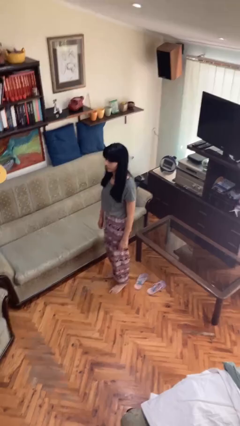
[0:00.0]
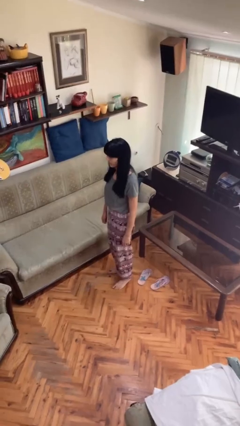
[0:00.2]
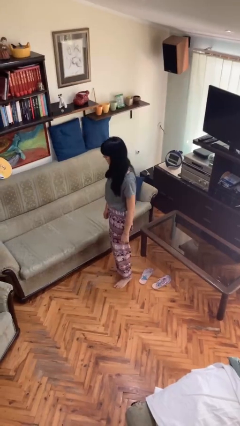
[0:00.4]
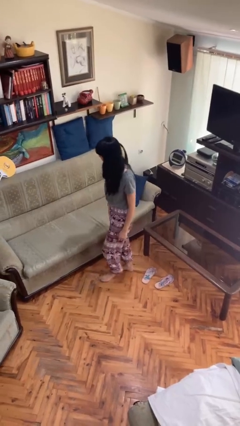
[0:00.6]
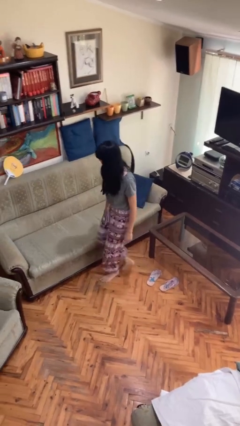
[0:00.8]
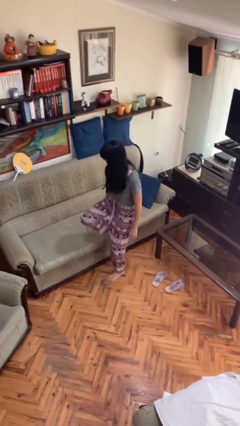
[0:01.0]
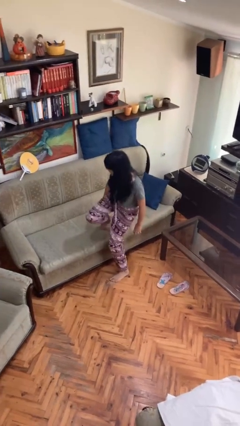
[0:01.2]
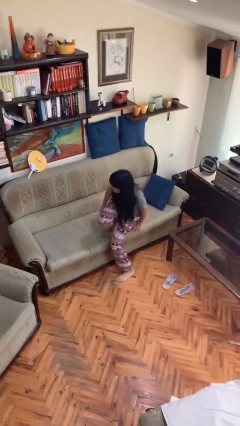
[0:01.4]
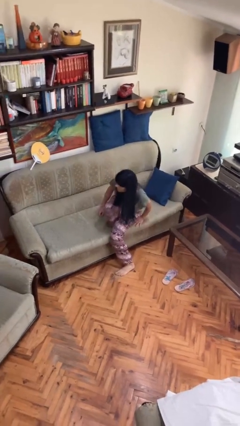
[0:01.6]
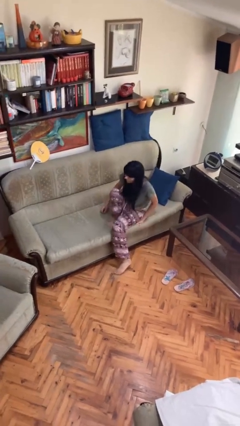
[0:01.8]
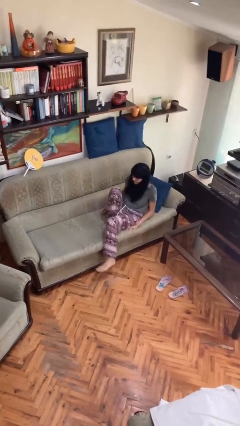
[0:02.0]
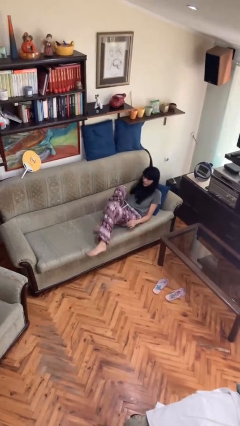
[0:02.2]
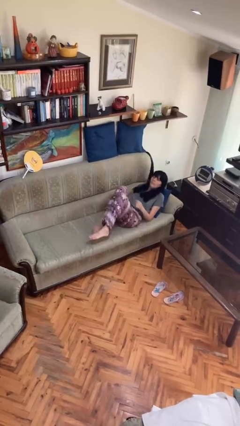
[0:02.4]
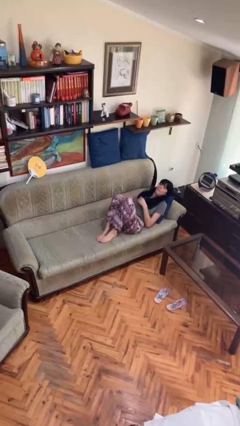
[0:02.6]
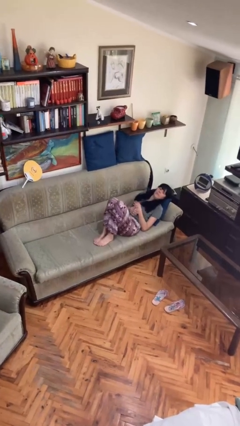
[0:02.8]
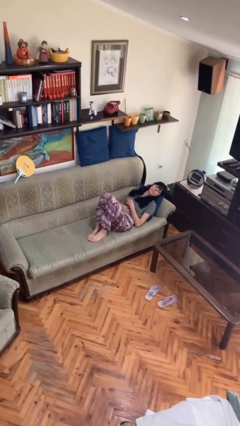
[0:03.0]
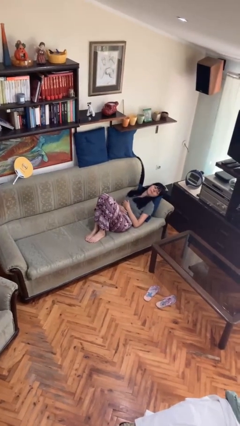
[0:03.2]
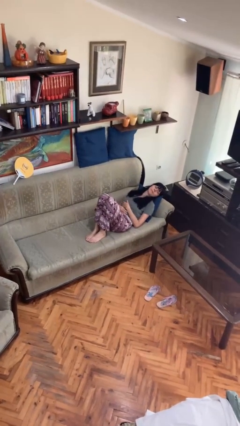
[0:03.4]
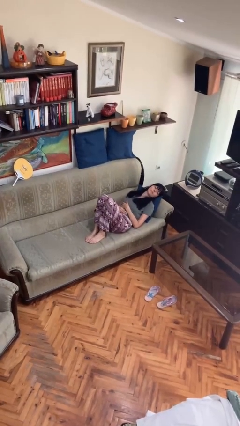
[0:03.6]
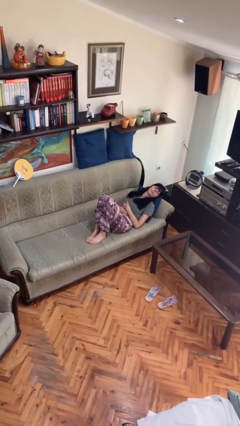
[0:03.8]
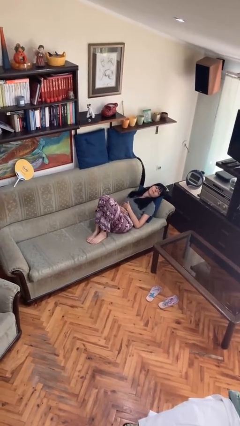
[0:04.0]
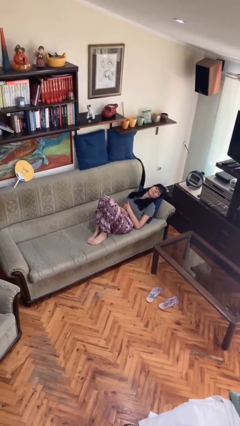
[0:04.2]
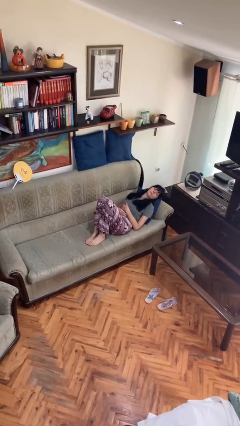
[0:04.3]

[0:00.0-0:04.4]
person lies down on couch

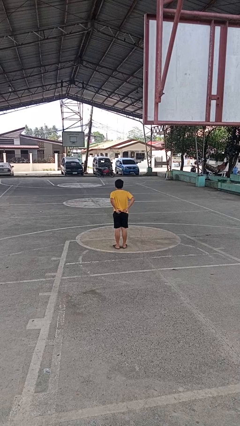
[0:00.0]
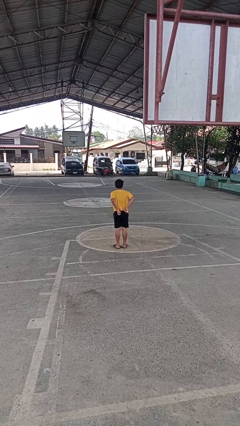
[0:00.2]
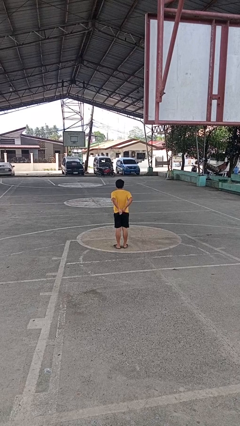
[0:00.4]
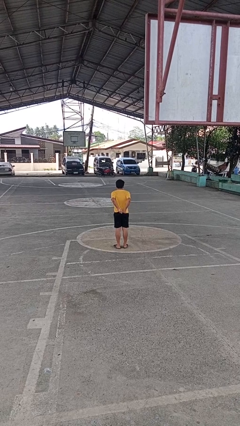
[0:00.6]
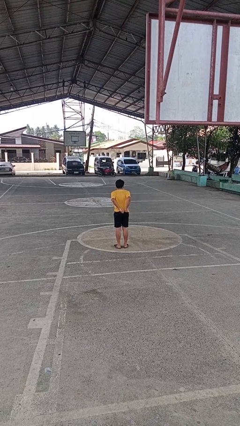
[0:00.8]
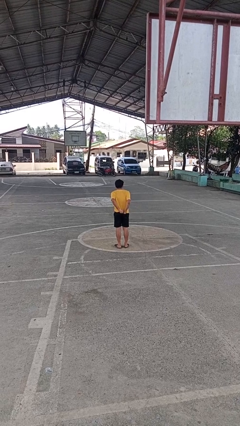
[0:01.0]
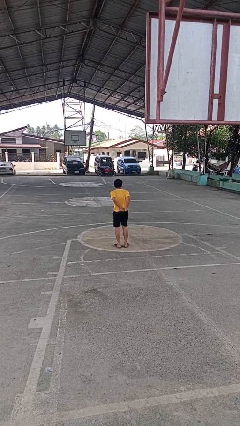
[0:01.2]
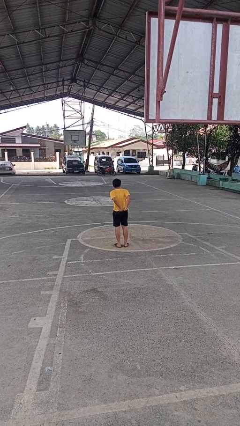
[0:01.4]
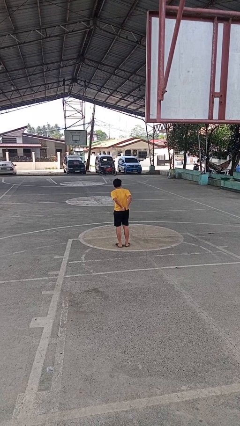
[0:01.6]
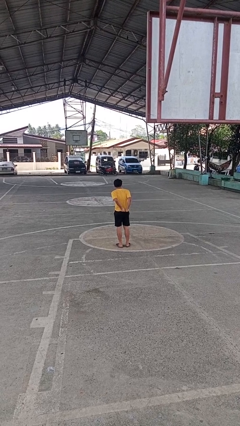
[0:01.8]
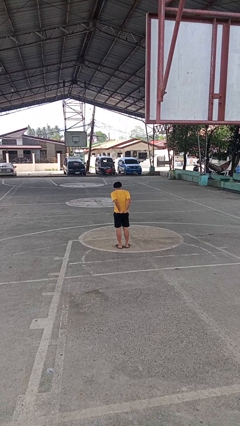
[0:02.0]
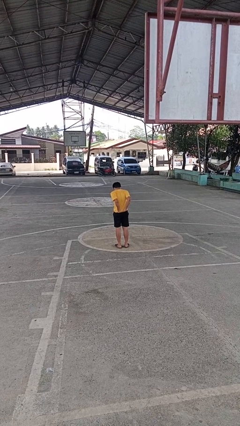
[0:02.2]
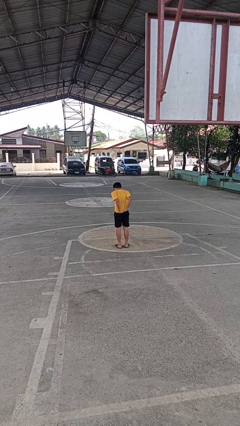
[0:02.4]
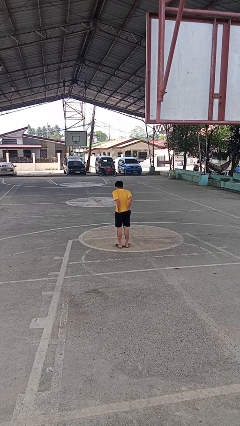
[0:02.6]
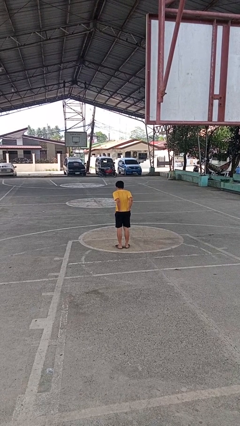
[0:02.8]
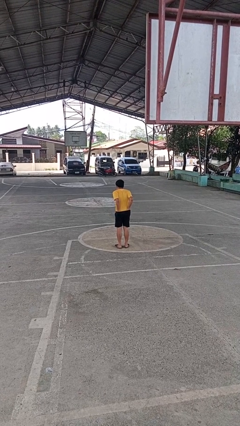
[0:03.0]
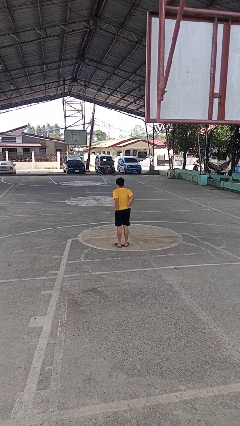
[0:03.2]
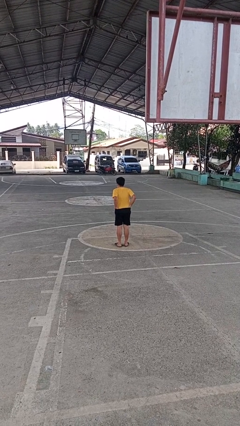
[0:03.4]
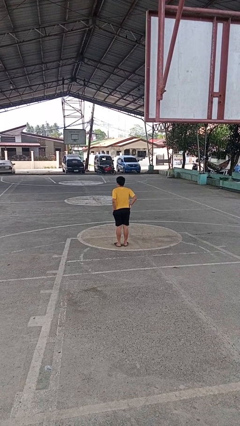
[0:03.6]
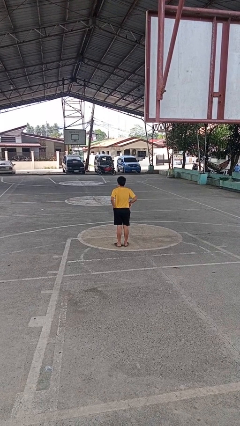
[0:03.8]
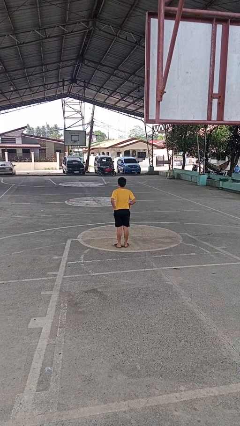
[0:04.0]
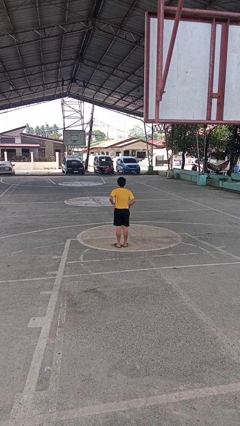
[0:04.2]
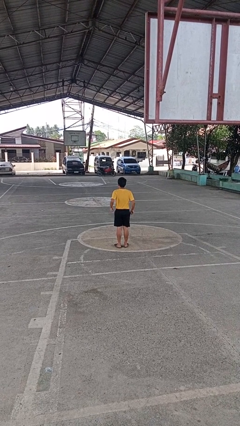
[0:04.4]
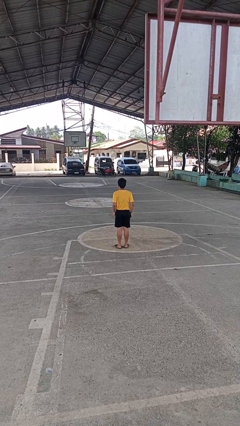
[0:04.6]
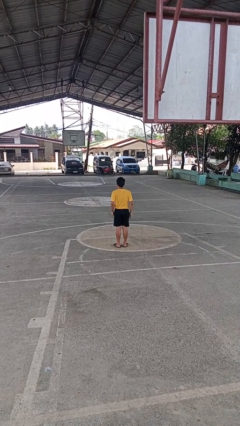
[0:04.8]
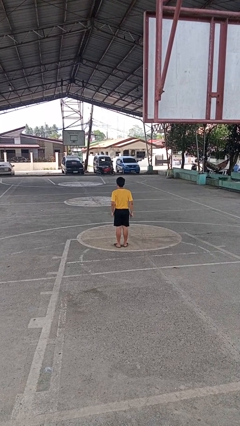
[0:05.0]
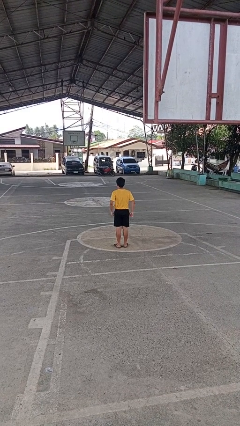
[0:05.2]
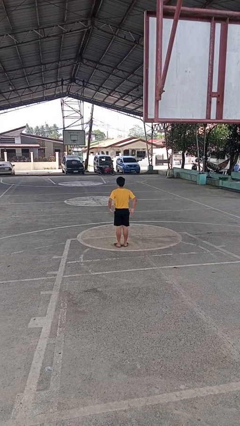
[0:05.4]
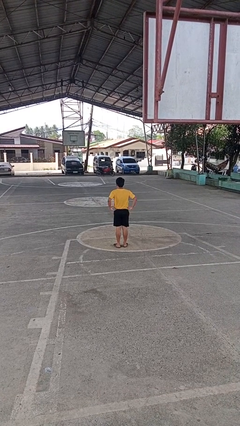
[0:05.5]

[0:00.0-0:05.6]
person tucks in shirt

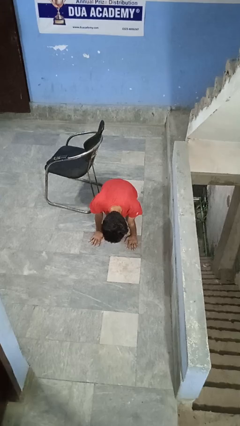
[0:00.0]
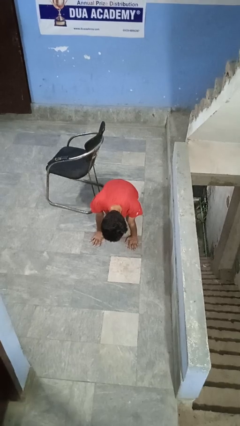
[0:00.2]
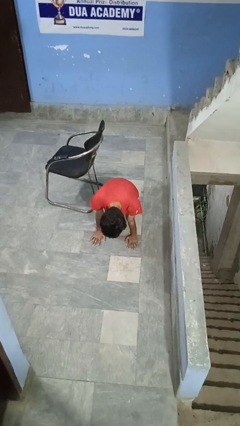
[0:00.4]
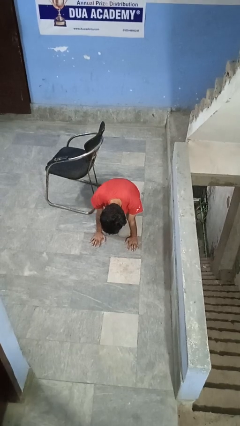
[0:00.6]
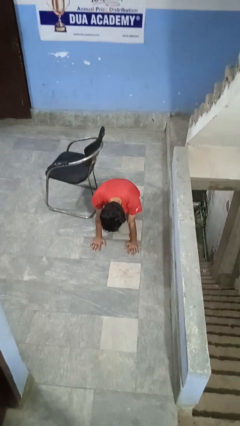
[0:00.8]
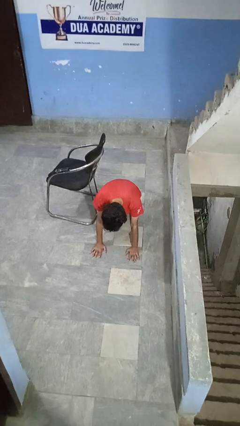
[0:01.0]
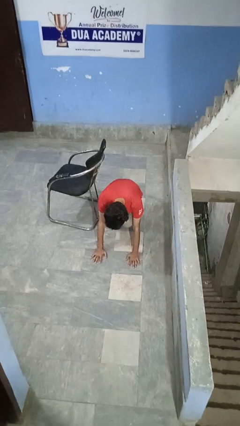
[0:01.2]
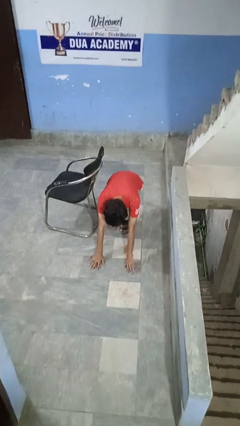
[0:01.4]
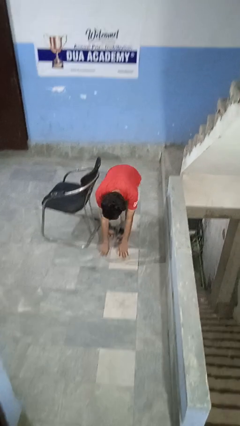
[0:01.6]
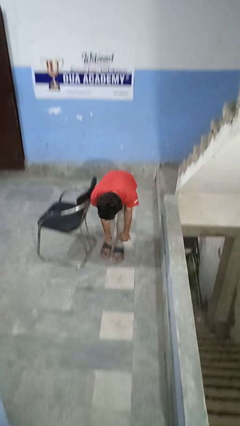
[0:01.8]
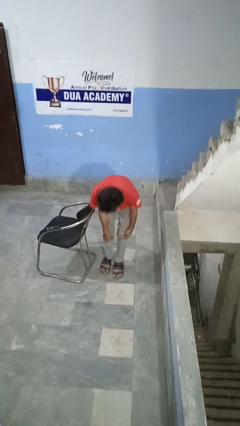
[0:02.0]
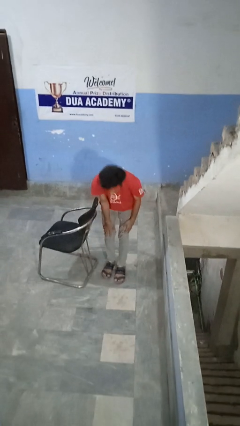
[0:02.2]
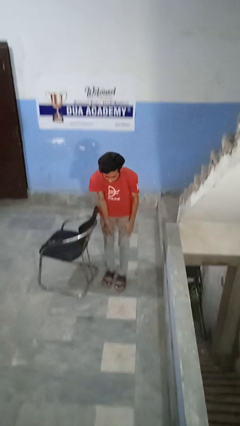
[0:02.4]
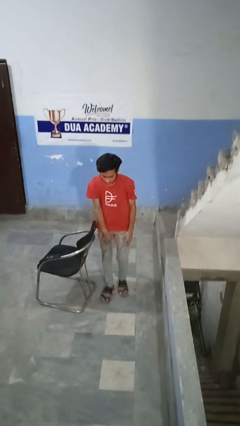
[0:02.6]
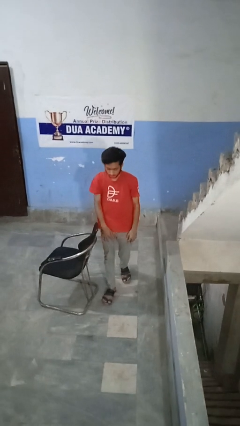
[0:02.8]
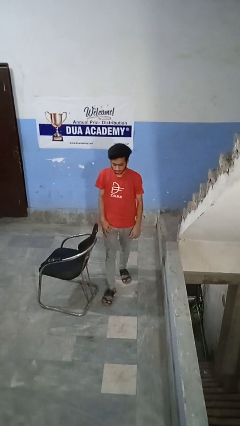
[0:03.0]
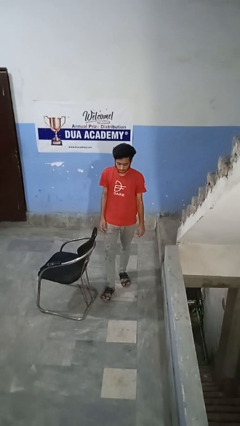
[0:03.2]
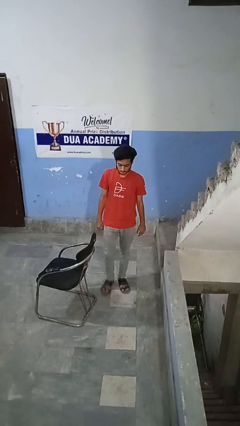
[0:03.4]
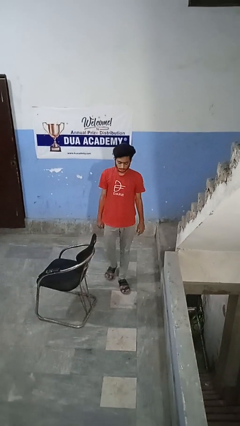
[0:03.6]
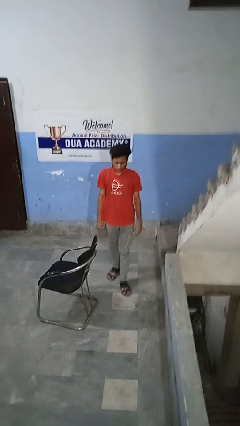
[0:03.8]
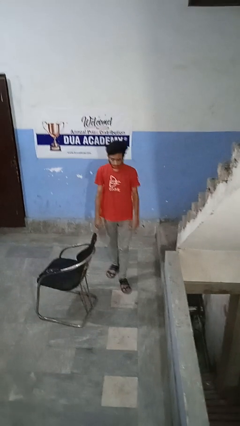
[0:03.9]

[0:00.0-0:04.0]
person stands up from floor

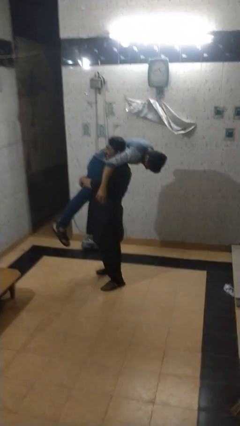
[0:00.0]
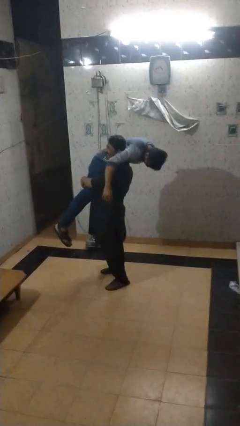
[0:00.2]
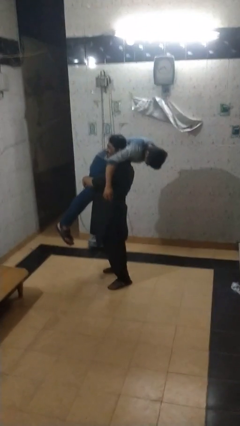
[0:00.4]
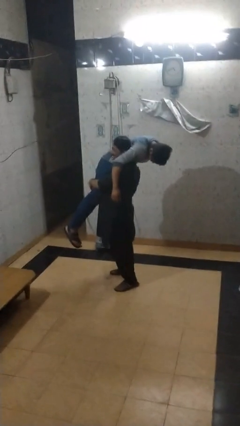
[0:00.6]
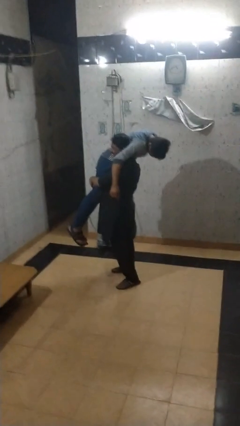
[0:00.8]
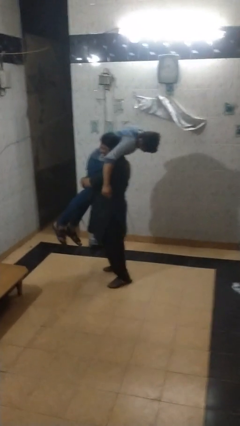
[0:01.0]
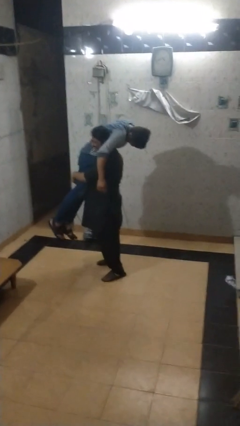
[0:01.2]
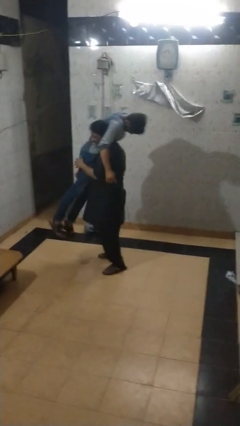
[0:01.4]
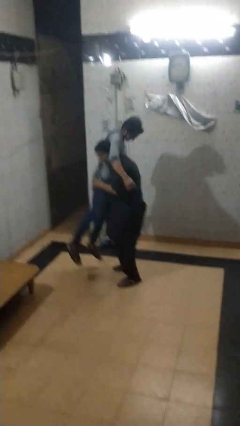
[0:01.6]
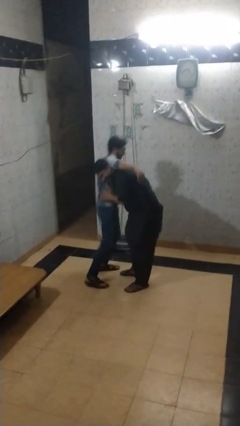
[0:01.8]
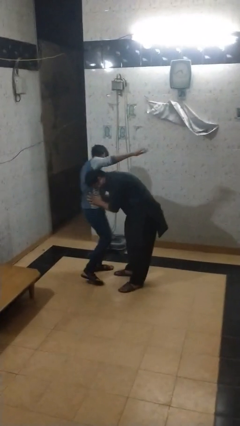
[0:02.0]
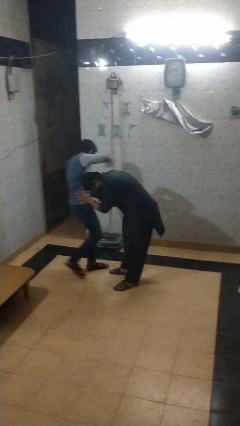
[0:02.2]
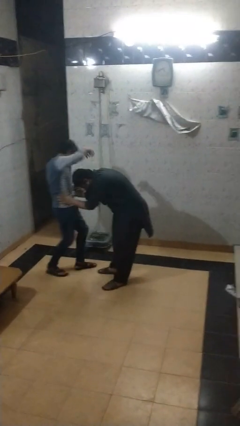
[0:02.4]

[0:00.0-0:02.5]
person puts down person

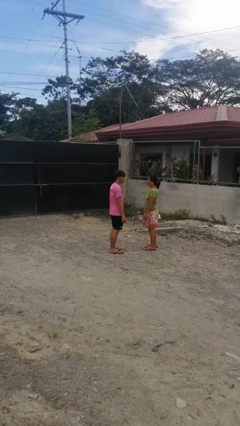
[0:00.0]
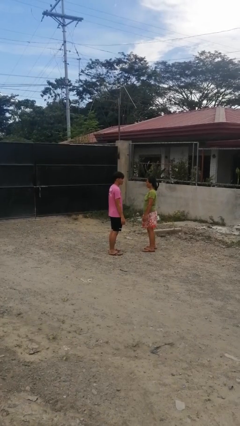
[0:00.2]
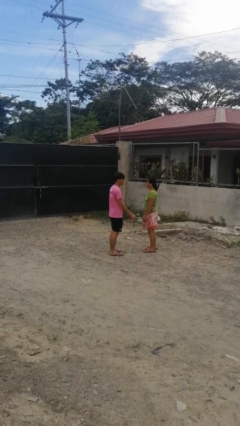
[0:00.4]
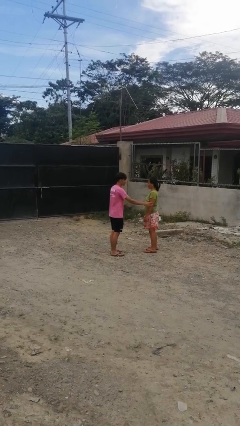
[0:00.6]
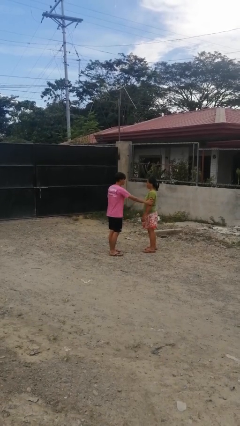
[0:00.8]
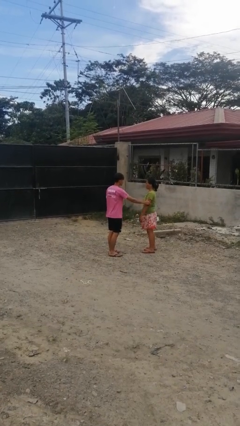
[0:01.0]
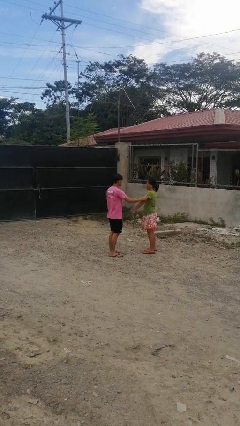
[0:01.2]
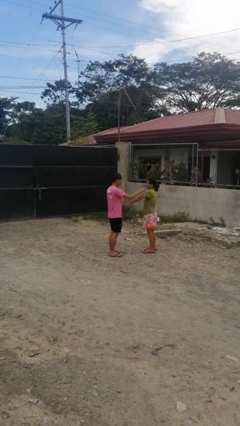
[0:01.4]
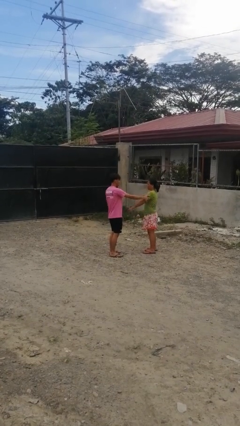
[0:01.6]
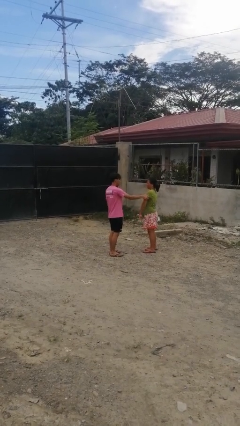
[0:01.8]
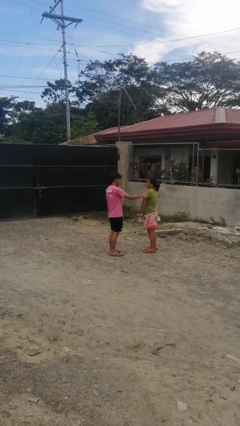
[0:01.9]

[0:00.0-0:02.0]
person grabs person by bicep
